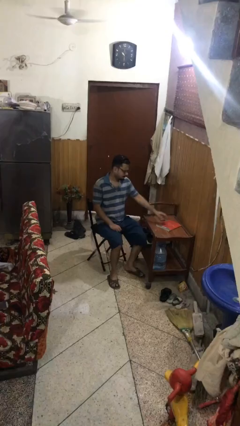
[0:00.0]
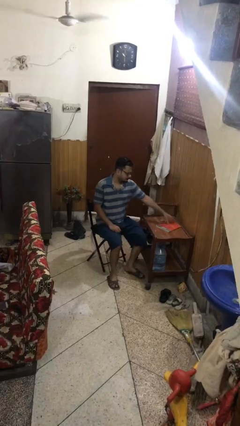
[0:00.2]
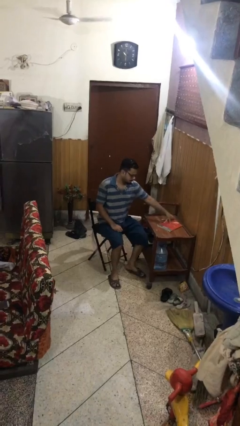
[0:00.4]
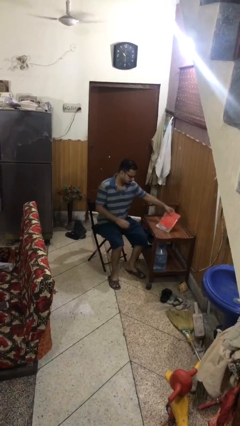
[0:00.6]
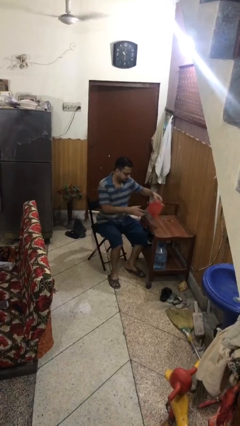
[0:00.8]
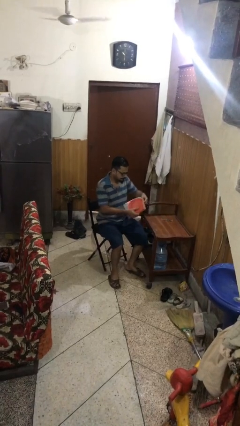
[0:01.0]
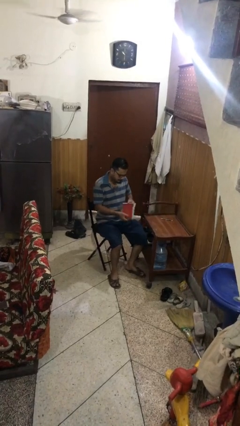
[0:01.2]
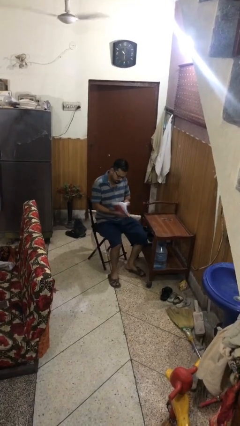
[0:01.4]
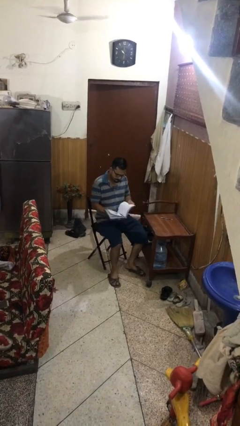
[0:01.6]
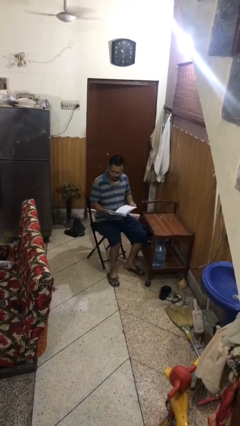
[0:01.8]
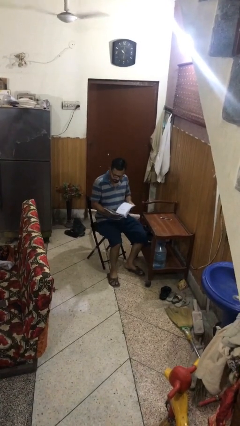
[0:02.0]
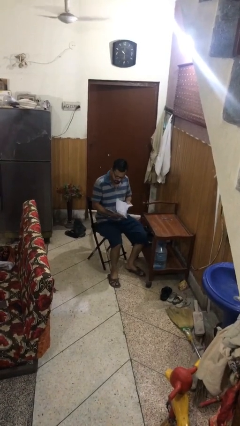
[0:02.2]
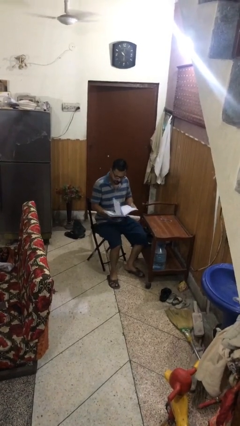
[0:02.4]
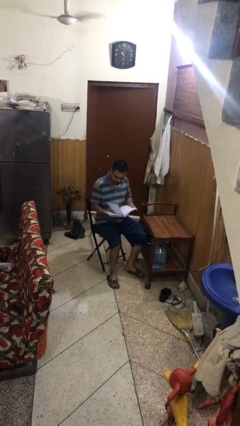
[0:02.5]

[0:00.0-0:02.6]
person reads document

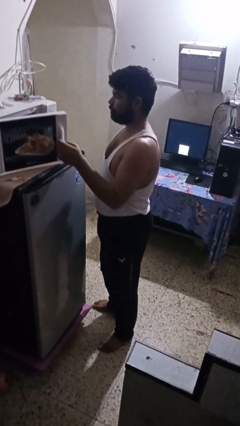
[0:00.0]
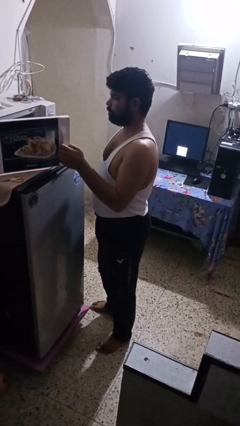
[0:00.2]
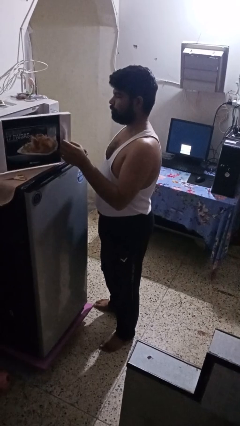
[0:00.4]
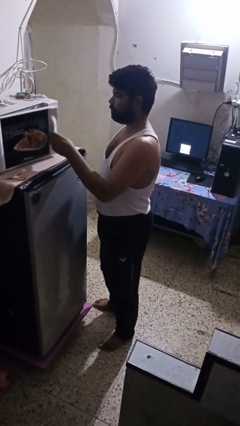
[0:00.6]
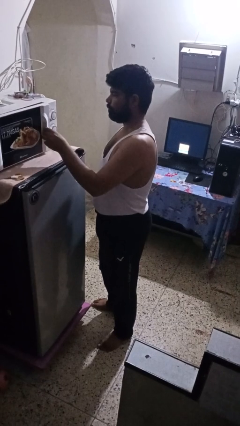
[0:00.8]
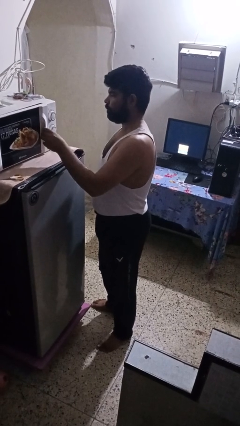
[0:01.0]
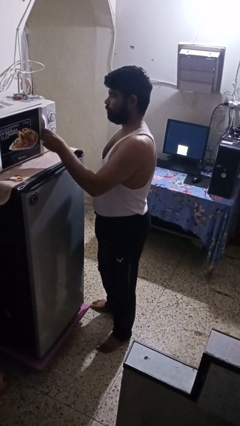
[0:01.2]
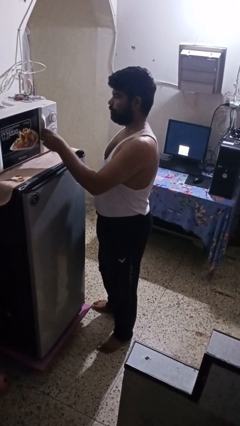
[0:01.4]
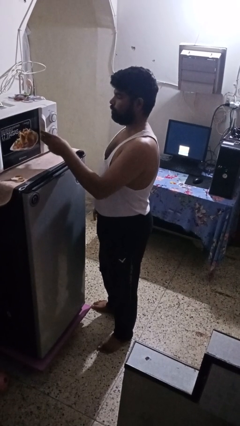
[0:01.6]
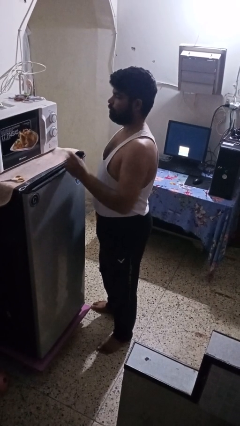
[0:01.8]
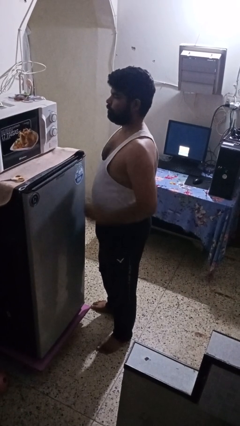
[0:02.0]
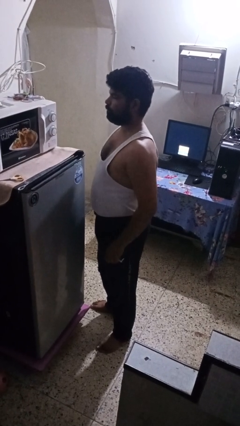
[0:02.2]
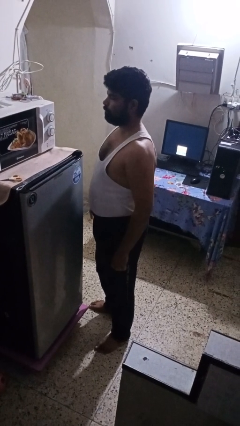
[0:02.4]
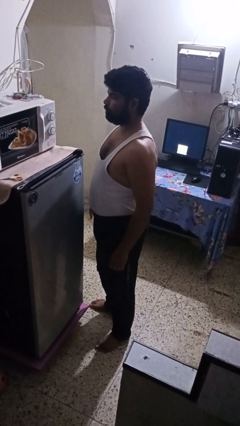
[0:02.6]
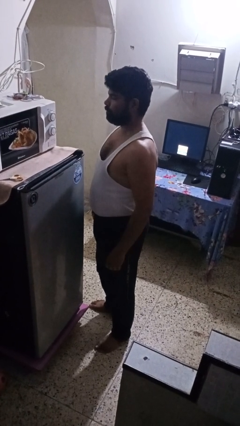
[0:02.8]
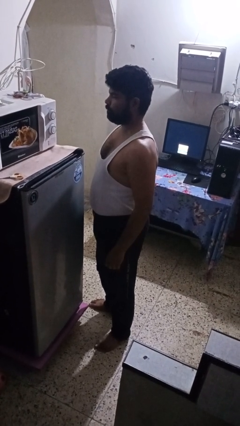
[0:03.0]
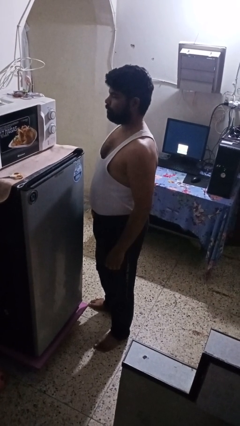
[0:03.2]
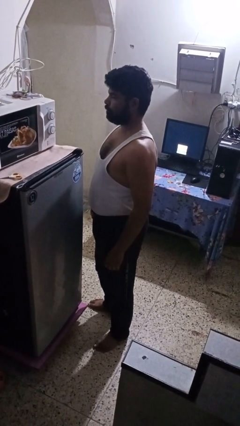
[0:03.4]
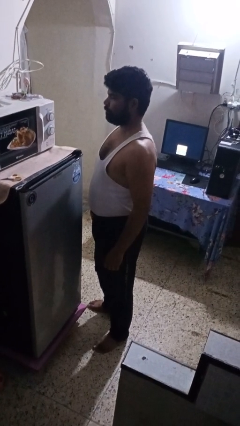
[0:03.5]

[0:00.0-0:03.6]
person closes microwave

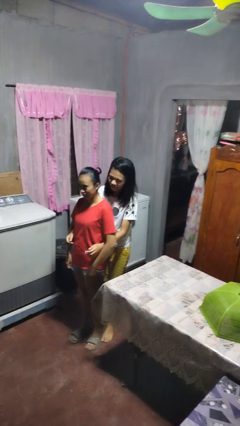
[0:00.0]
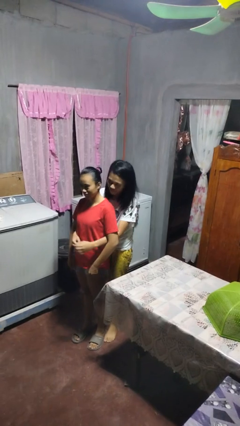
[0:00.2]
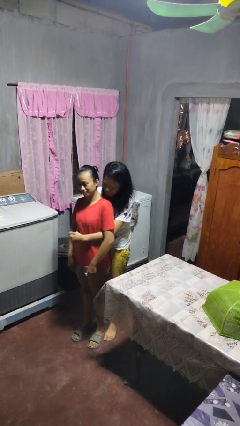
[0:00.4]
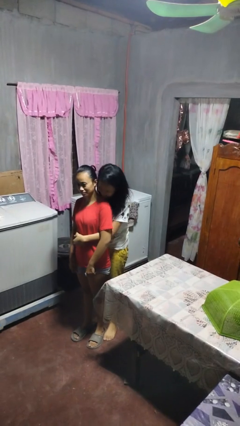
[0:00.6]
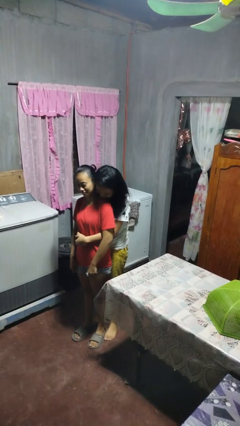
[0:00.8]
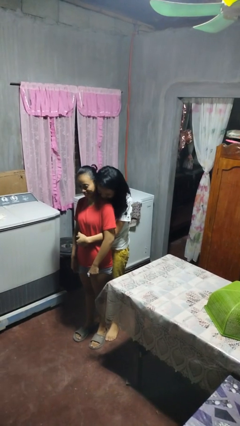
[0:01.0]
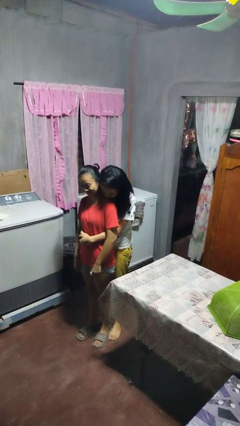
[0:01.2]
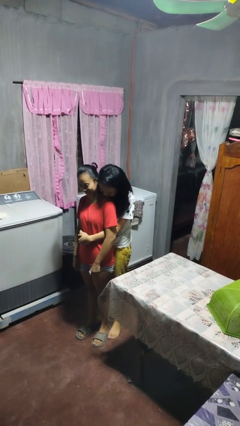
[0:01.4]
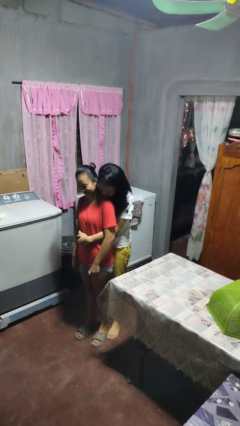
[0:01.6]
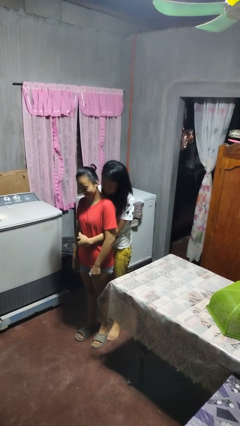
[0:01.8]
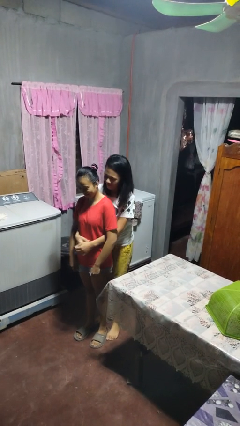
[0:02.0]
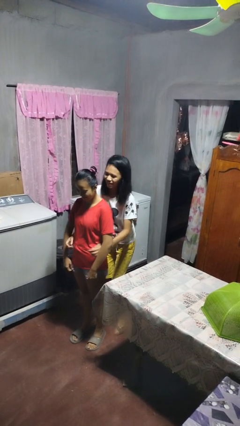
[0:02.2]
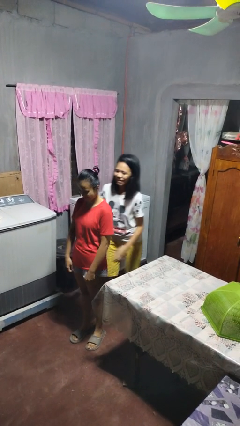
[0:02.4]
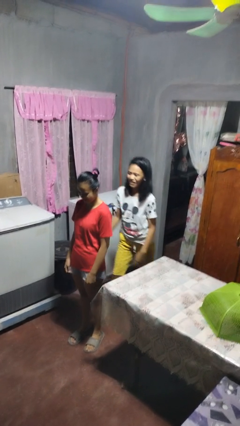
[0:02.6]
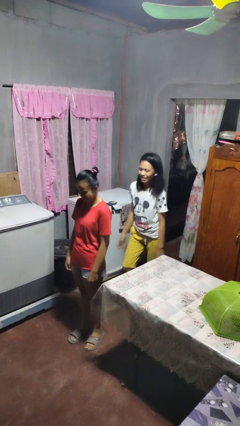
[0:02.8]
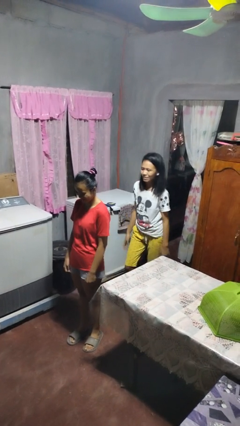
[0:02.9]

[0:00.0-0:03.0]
person hugs person from behind

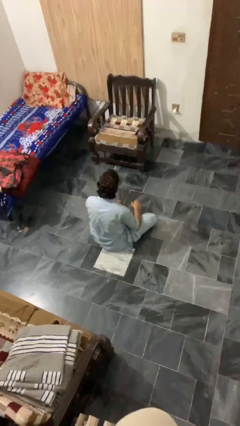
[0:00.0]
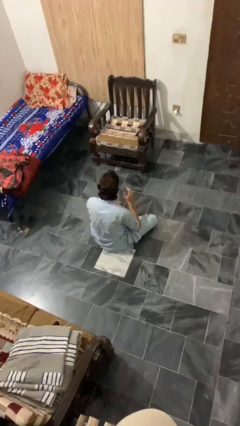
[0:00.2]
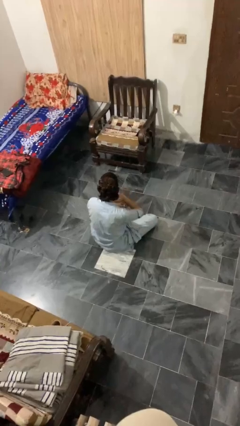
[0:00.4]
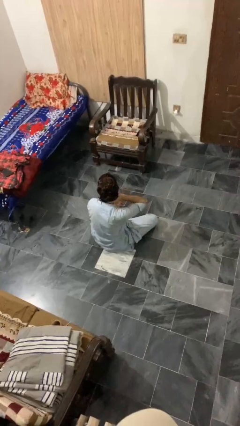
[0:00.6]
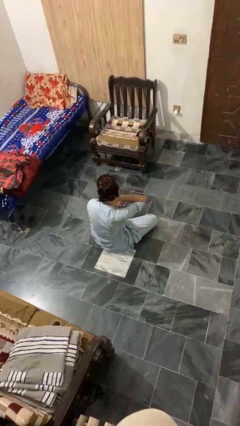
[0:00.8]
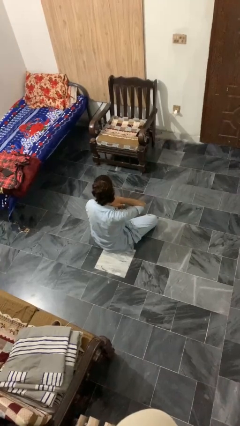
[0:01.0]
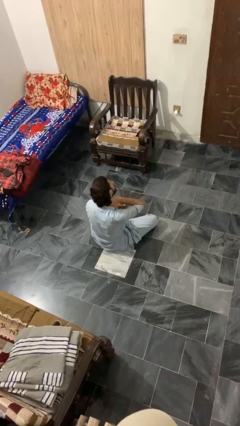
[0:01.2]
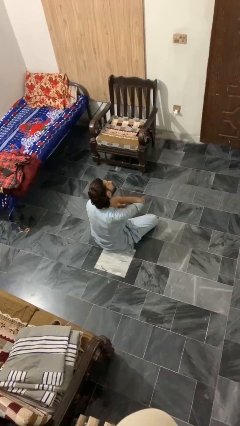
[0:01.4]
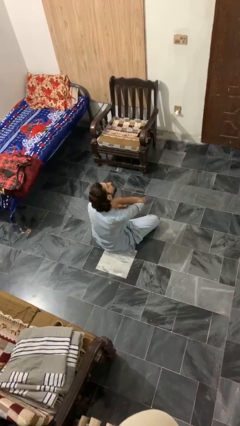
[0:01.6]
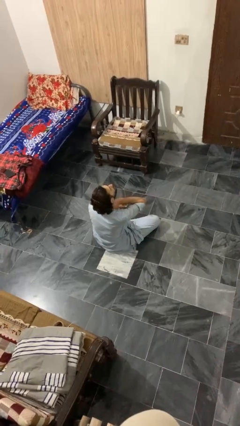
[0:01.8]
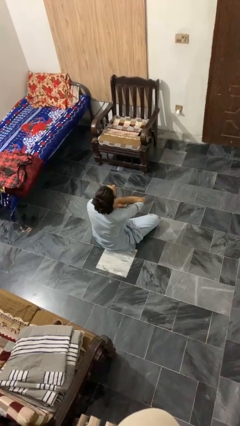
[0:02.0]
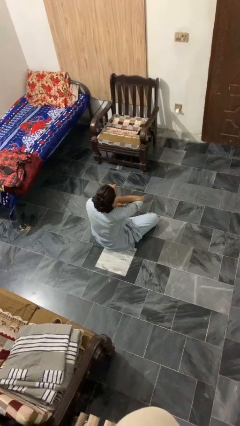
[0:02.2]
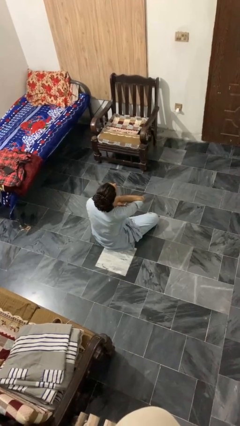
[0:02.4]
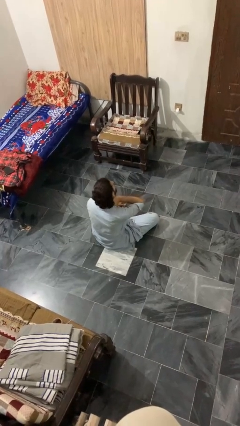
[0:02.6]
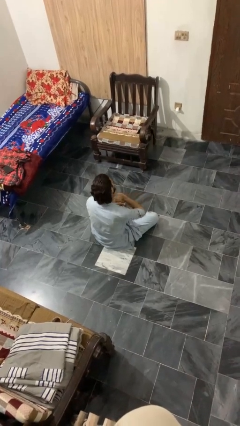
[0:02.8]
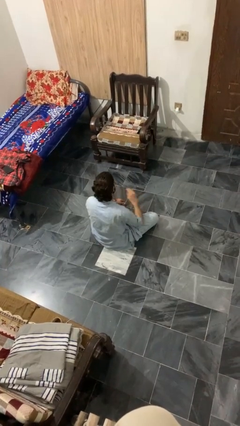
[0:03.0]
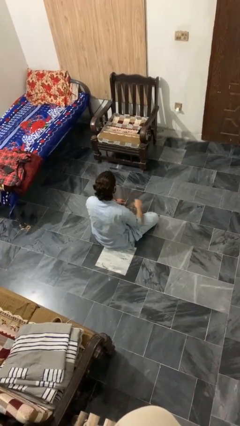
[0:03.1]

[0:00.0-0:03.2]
person rubs neck

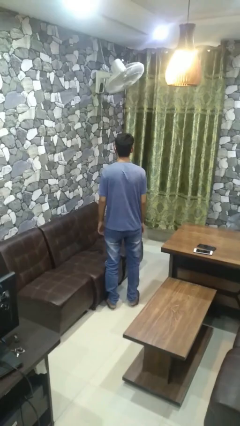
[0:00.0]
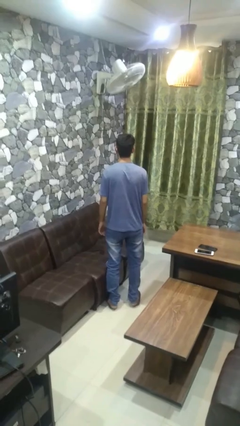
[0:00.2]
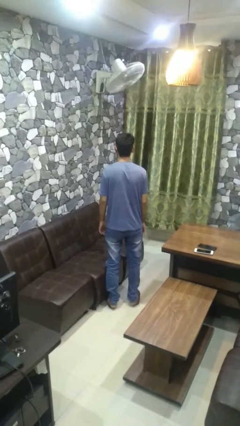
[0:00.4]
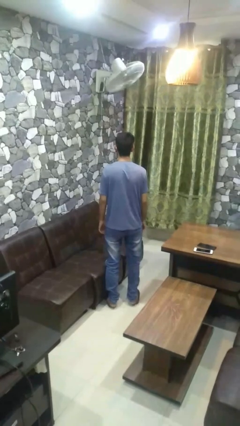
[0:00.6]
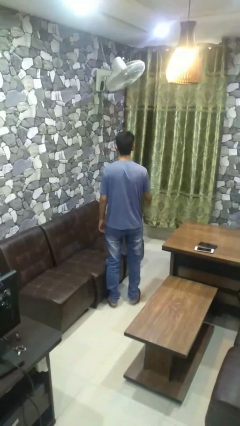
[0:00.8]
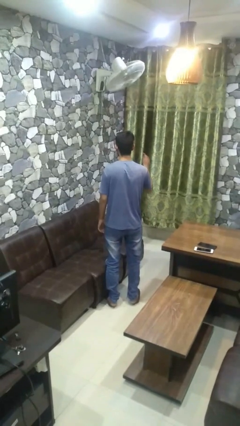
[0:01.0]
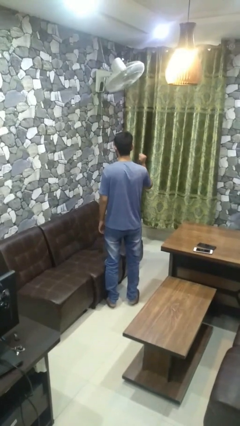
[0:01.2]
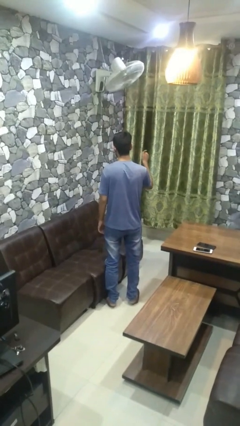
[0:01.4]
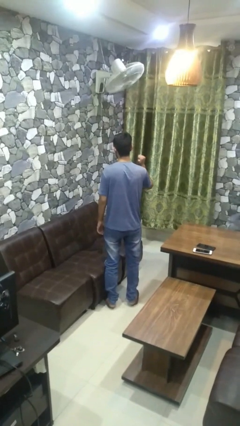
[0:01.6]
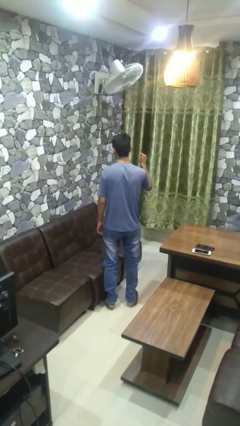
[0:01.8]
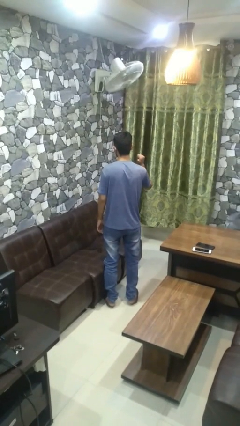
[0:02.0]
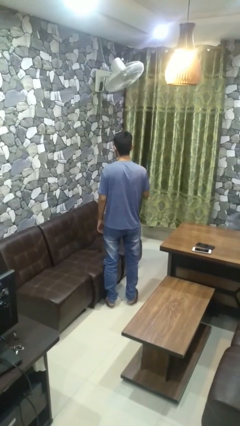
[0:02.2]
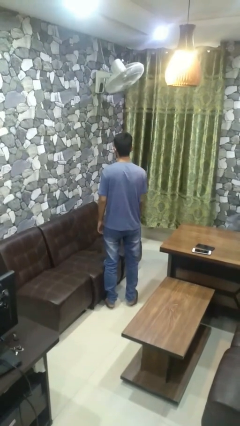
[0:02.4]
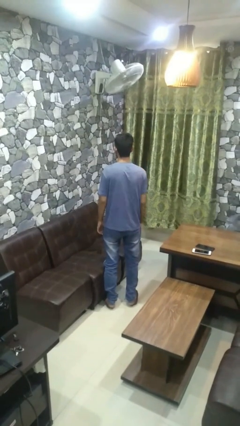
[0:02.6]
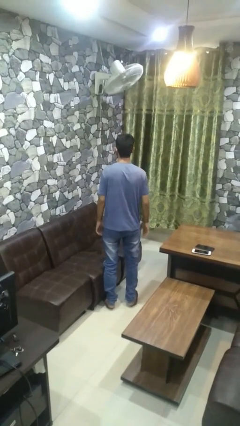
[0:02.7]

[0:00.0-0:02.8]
person gestures behind me

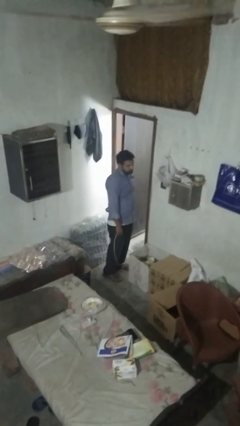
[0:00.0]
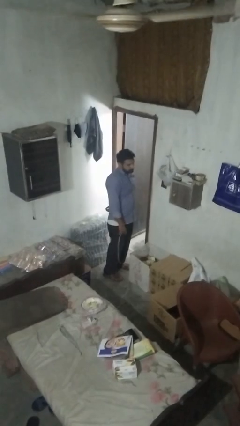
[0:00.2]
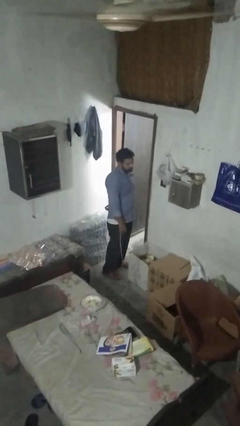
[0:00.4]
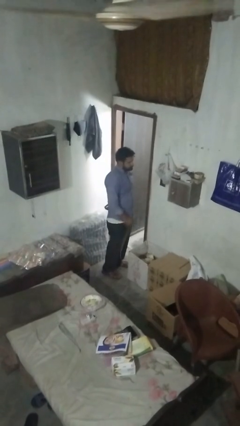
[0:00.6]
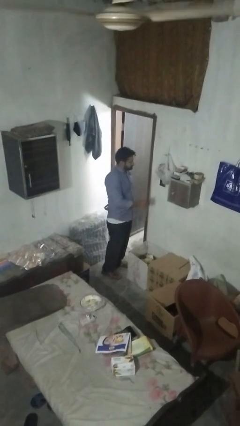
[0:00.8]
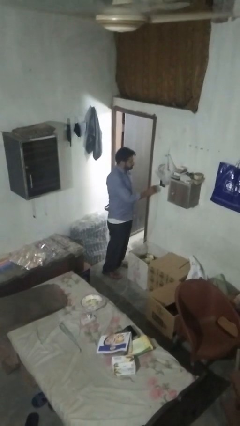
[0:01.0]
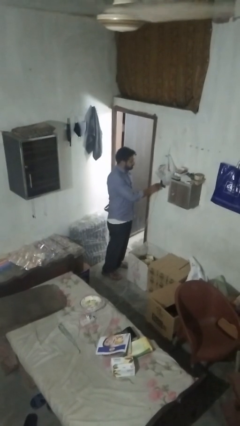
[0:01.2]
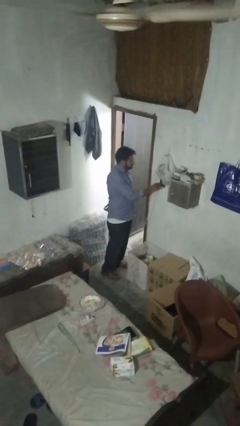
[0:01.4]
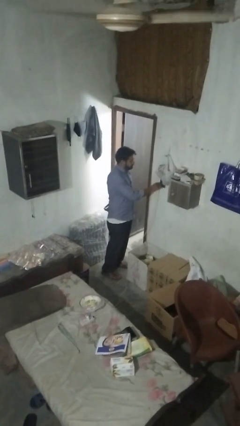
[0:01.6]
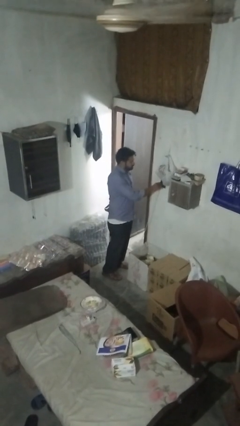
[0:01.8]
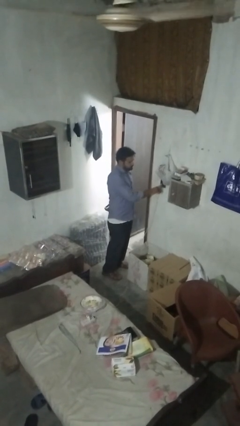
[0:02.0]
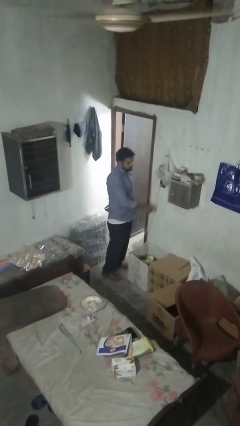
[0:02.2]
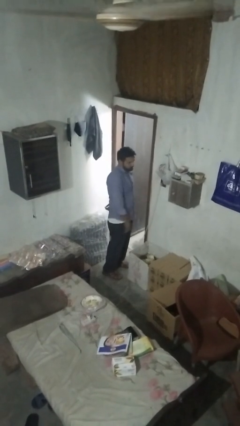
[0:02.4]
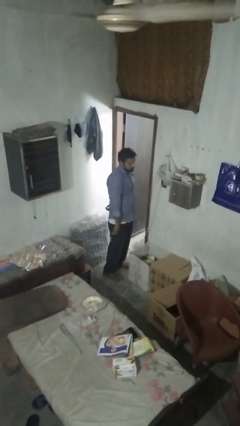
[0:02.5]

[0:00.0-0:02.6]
person plugs into electrical socket
